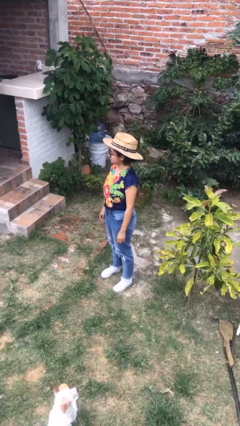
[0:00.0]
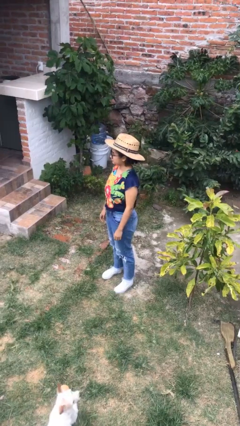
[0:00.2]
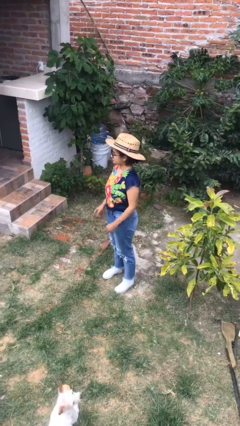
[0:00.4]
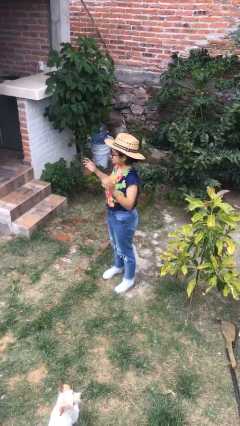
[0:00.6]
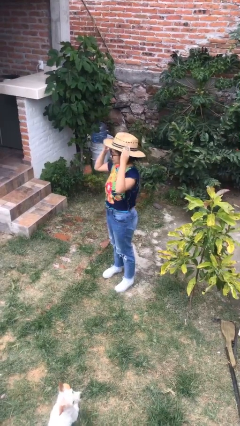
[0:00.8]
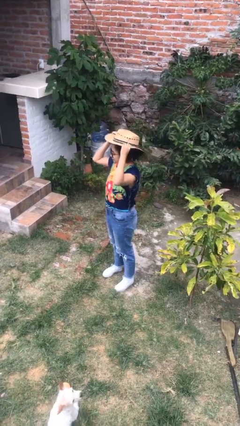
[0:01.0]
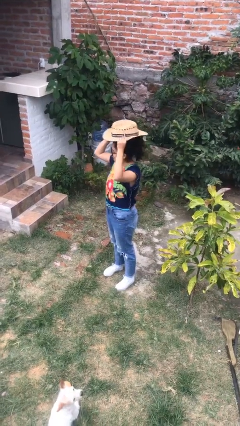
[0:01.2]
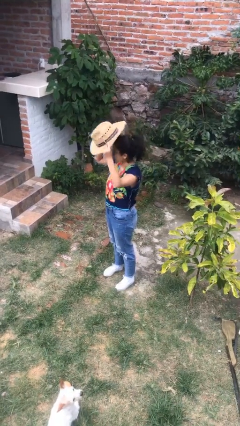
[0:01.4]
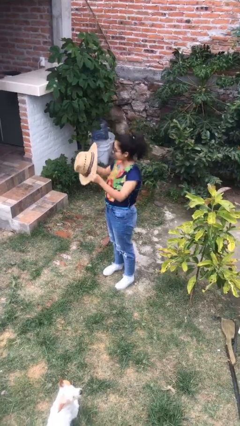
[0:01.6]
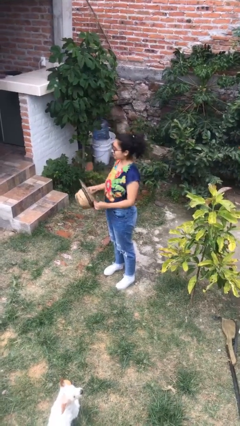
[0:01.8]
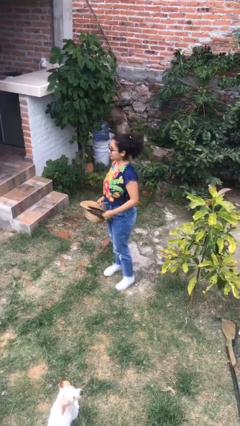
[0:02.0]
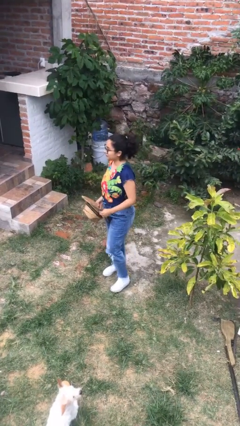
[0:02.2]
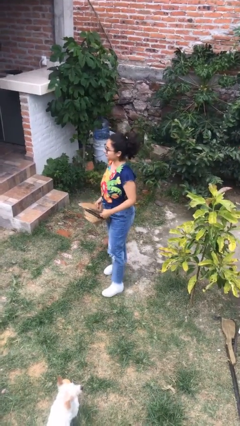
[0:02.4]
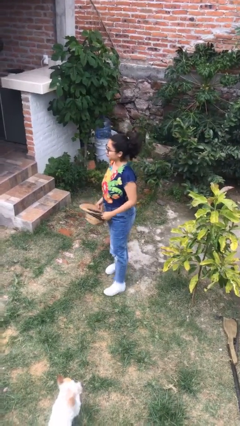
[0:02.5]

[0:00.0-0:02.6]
person takes off hat

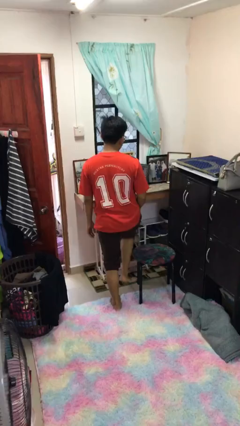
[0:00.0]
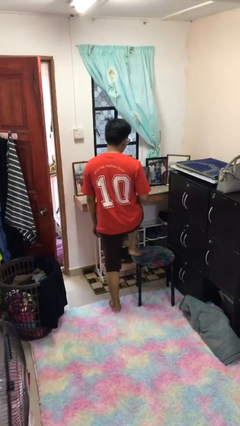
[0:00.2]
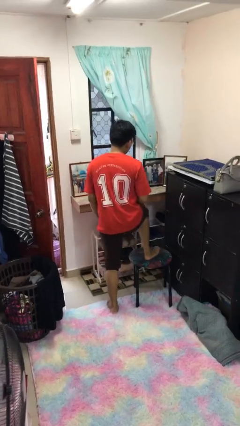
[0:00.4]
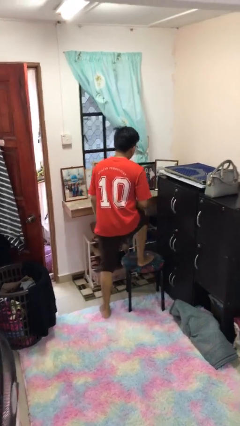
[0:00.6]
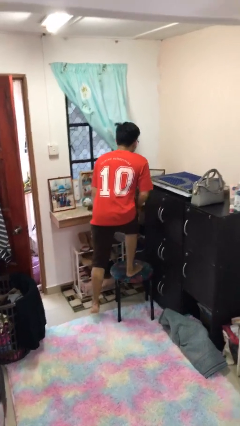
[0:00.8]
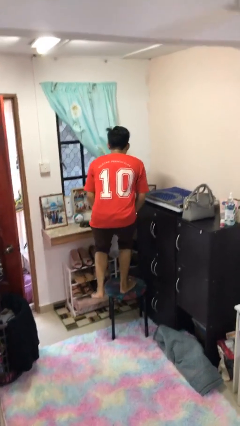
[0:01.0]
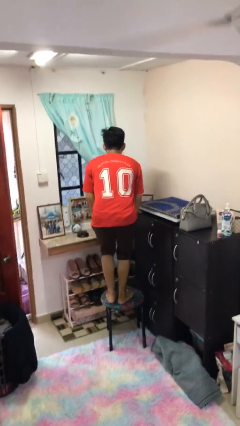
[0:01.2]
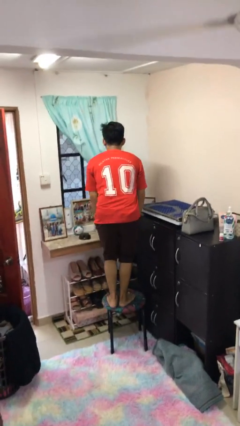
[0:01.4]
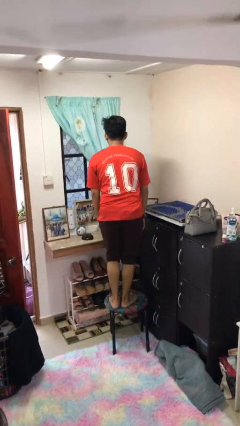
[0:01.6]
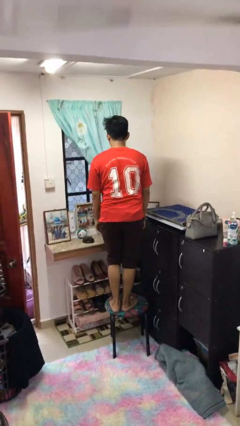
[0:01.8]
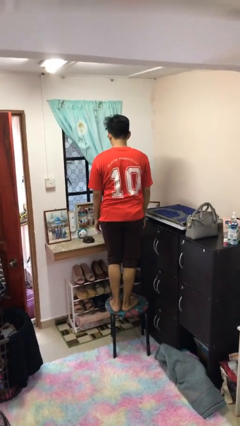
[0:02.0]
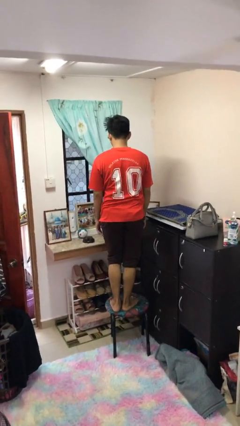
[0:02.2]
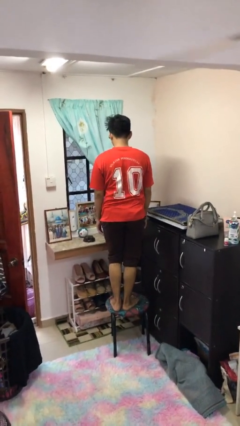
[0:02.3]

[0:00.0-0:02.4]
person climbs on chair

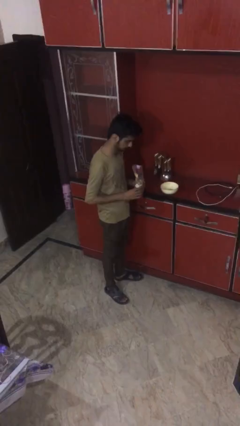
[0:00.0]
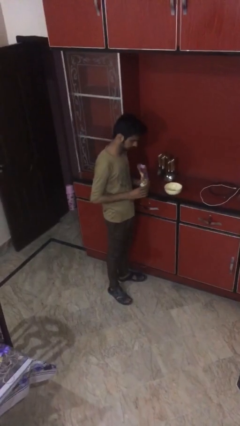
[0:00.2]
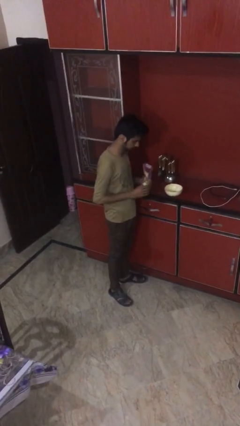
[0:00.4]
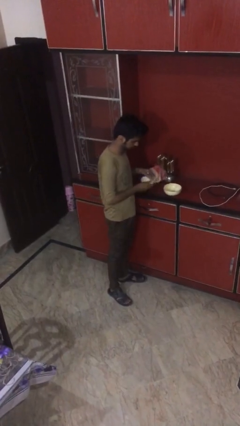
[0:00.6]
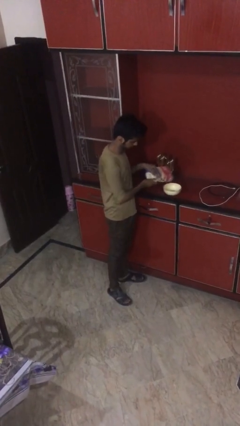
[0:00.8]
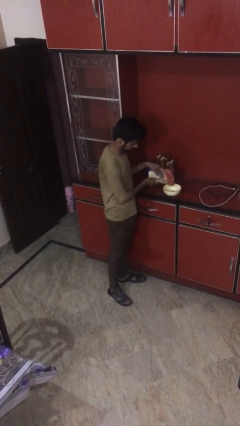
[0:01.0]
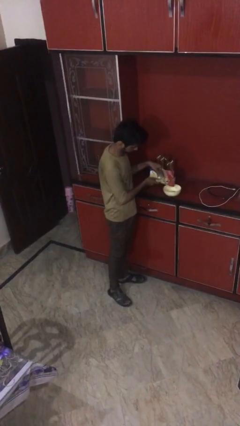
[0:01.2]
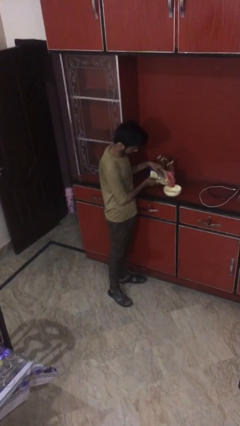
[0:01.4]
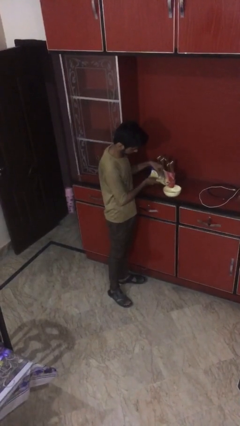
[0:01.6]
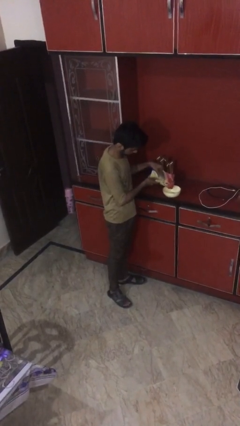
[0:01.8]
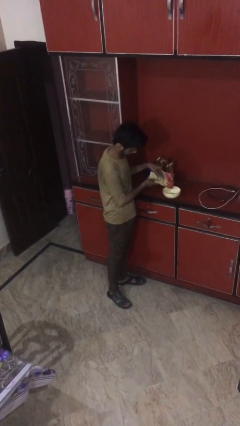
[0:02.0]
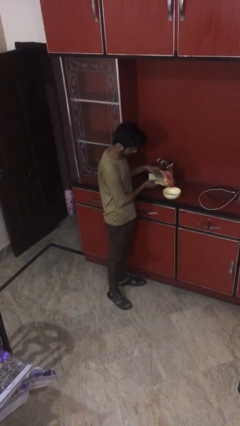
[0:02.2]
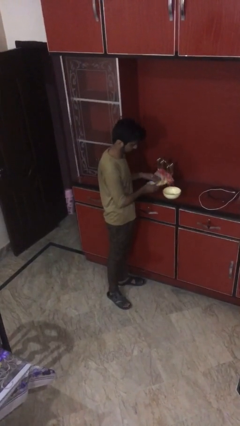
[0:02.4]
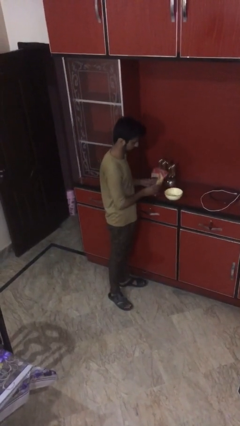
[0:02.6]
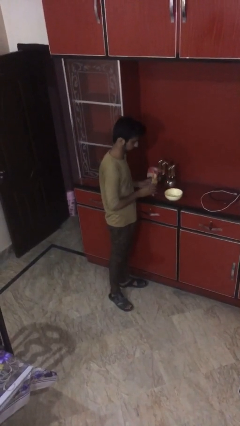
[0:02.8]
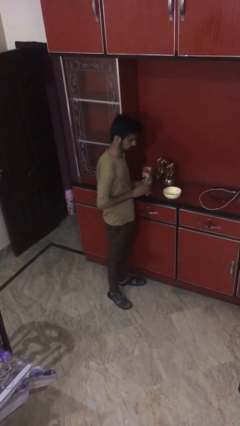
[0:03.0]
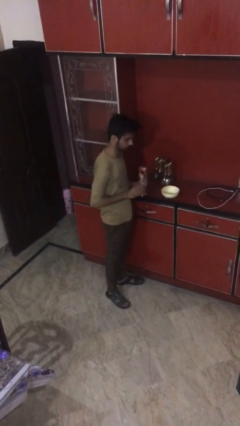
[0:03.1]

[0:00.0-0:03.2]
person pours into bowl

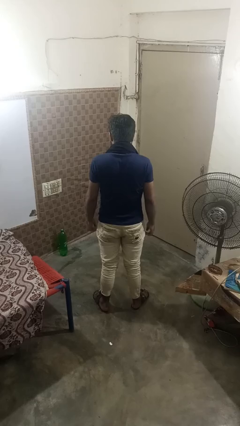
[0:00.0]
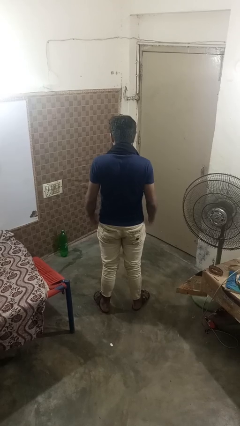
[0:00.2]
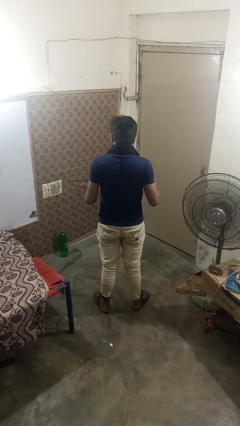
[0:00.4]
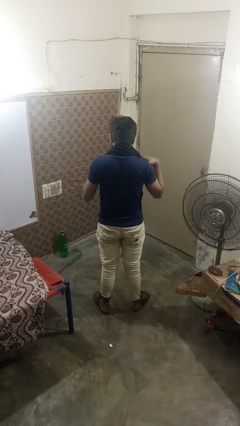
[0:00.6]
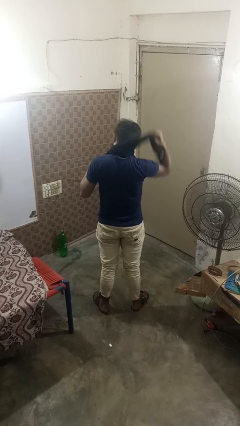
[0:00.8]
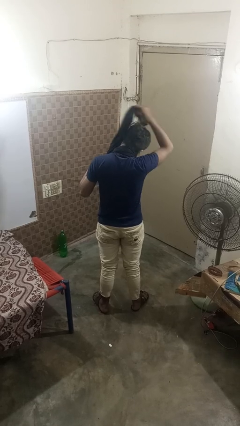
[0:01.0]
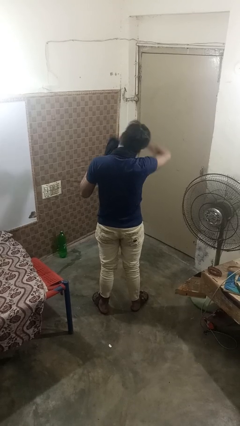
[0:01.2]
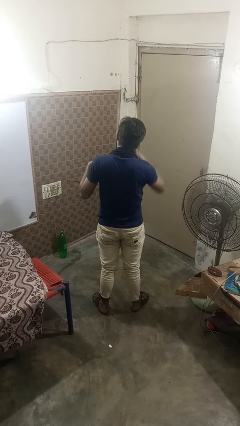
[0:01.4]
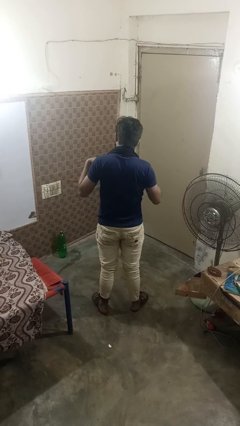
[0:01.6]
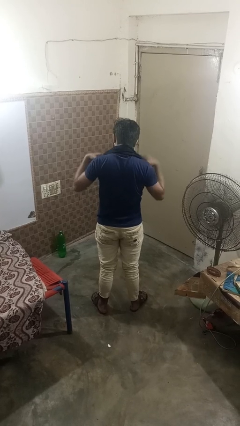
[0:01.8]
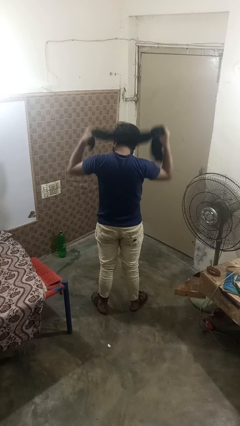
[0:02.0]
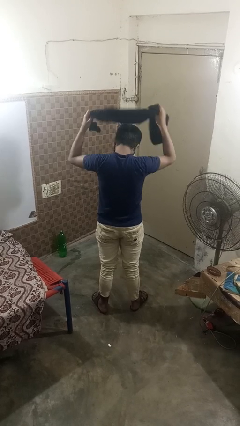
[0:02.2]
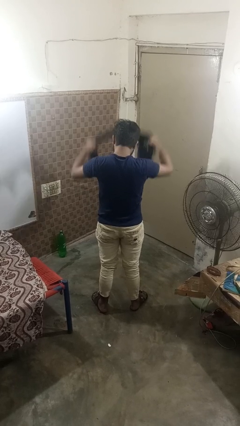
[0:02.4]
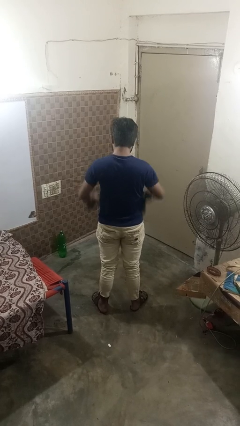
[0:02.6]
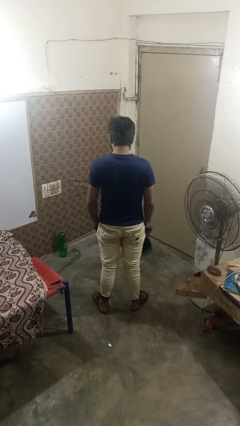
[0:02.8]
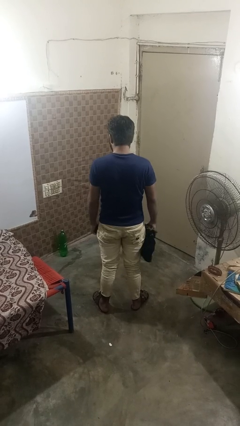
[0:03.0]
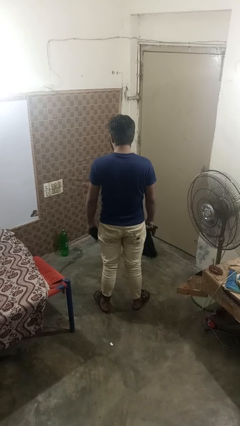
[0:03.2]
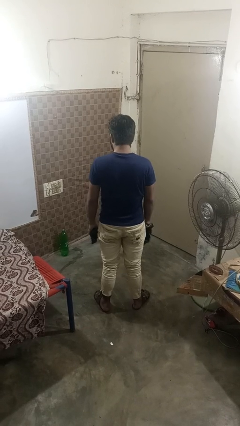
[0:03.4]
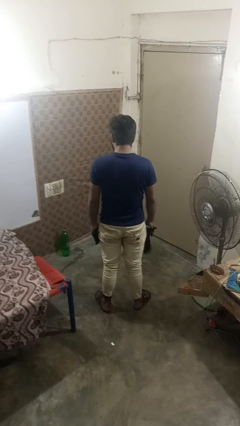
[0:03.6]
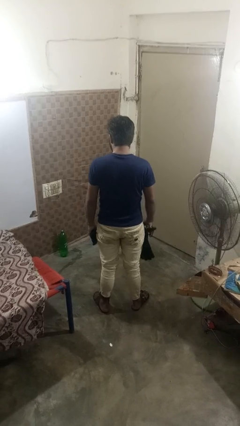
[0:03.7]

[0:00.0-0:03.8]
person takes off scarf

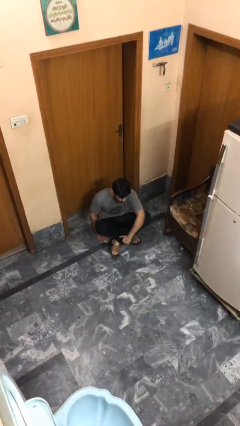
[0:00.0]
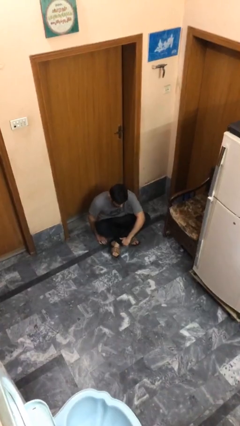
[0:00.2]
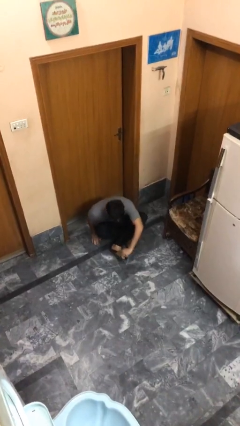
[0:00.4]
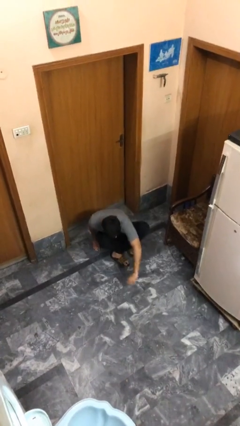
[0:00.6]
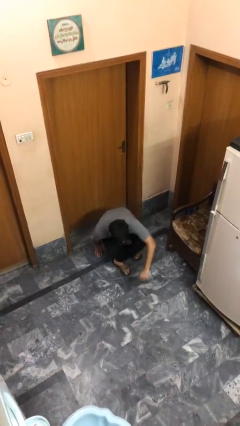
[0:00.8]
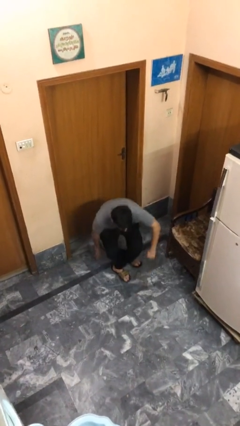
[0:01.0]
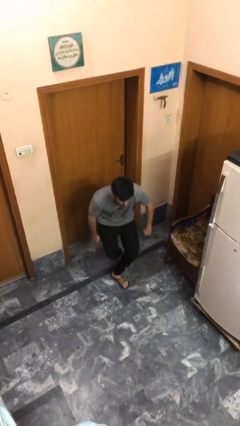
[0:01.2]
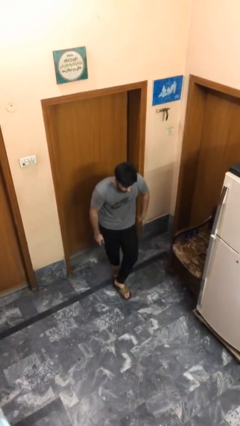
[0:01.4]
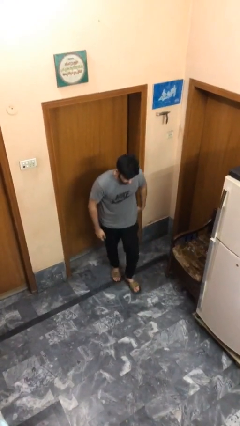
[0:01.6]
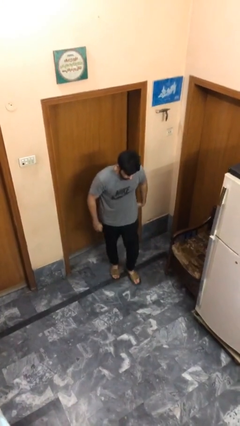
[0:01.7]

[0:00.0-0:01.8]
person stands up from floor

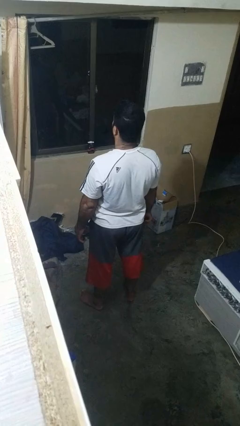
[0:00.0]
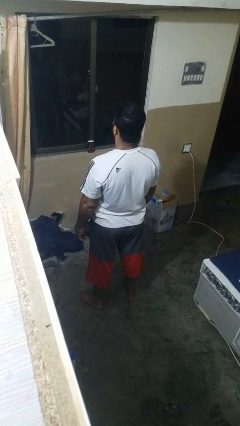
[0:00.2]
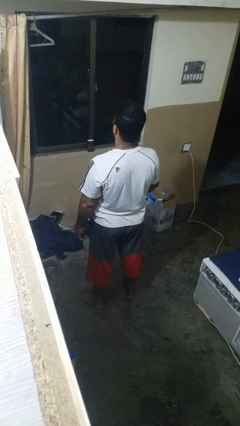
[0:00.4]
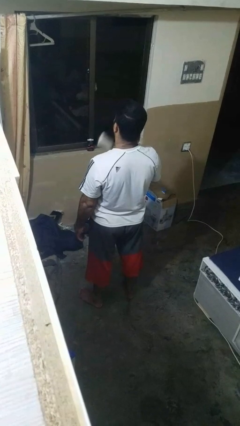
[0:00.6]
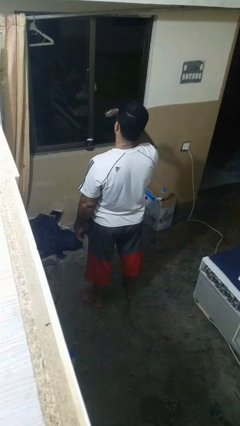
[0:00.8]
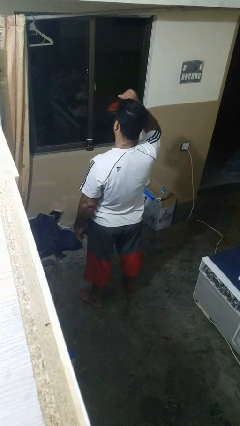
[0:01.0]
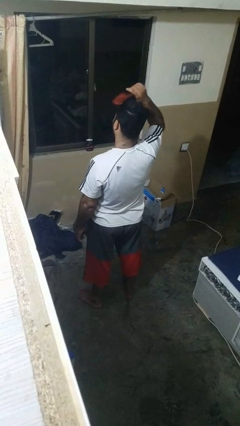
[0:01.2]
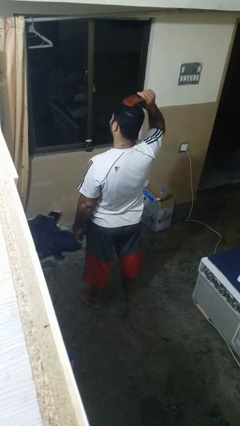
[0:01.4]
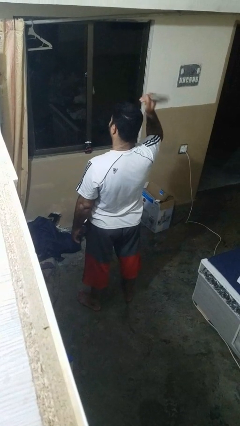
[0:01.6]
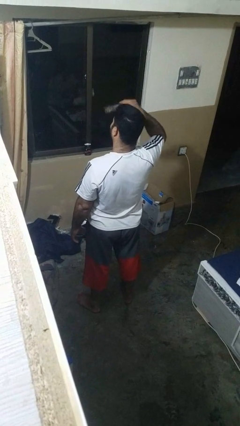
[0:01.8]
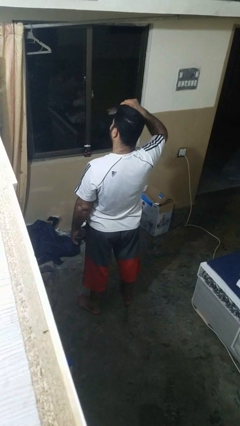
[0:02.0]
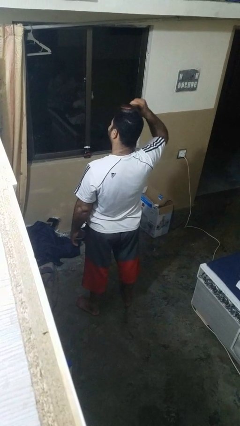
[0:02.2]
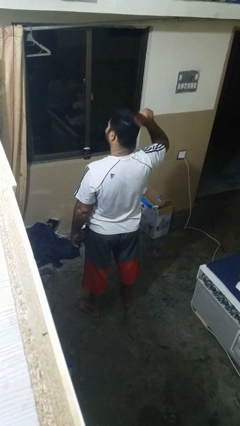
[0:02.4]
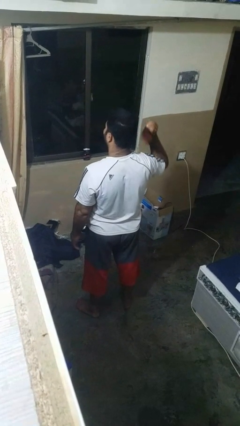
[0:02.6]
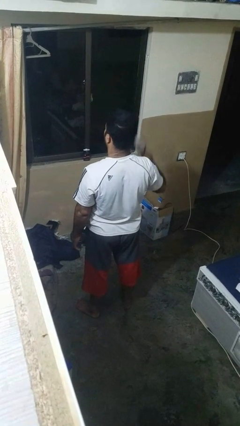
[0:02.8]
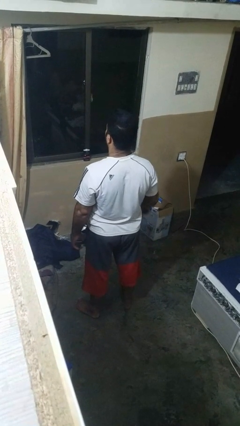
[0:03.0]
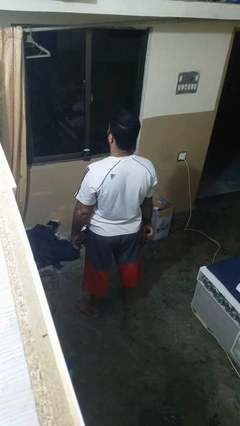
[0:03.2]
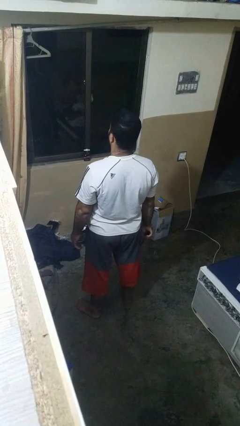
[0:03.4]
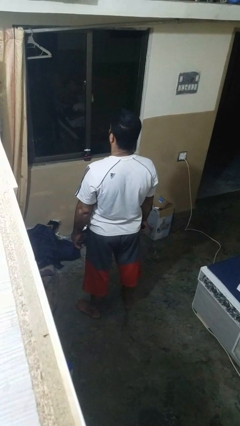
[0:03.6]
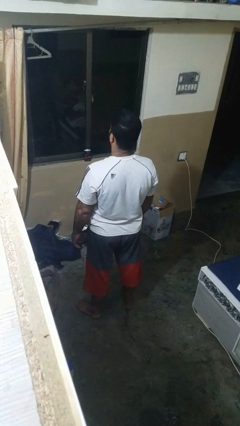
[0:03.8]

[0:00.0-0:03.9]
person brushes hair
